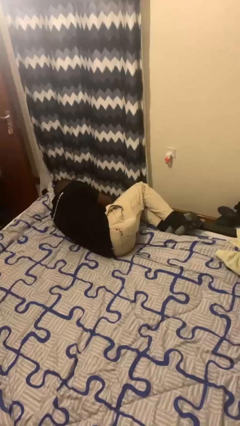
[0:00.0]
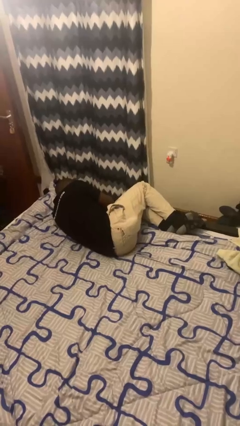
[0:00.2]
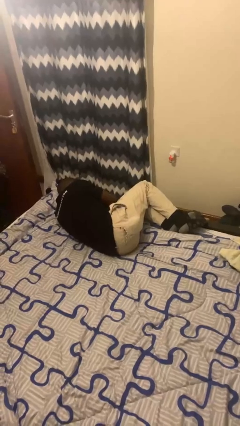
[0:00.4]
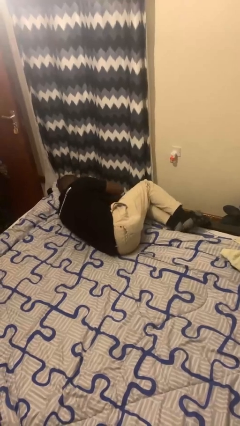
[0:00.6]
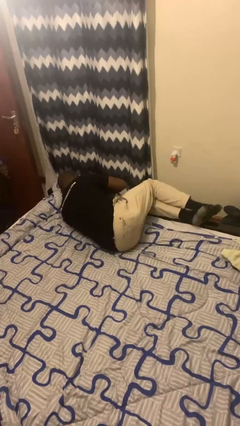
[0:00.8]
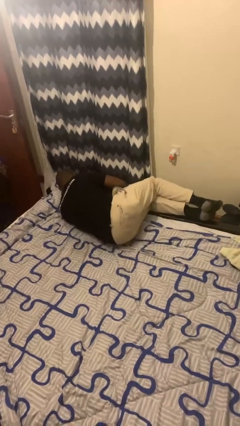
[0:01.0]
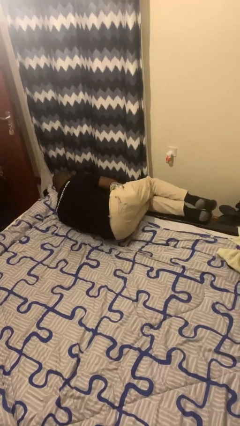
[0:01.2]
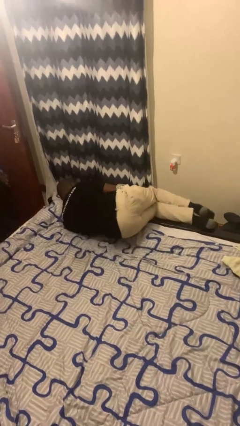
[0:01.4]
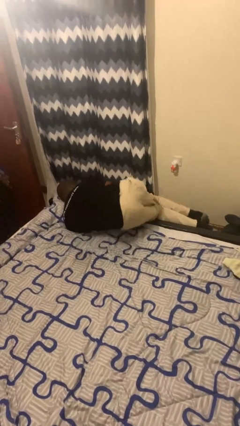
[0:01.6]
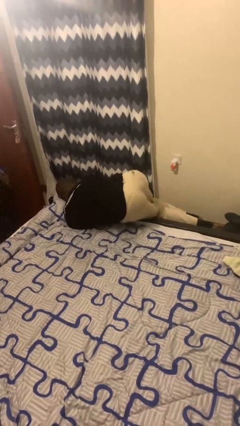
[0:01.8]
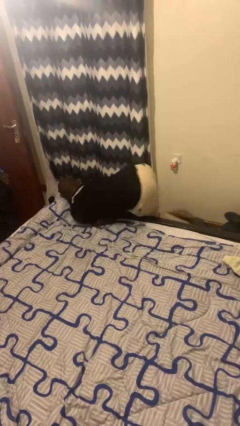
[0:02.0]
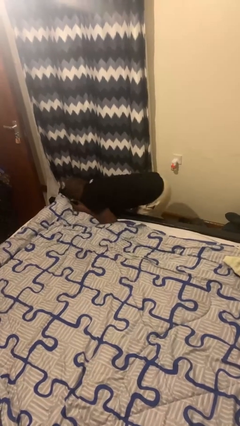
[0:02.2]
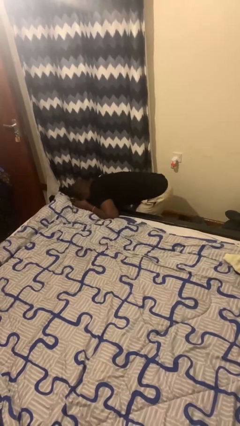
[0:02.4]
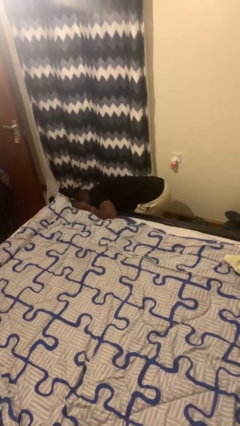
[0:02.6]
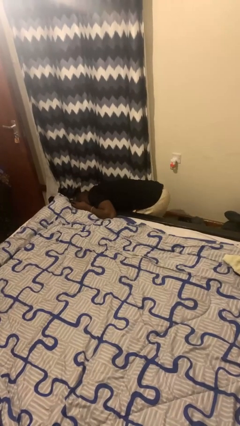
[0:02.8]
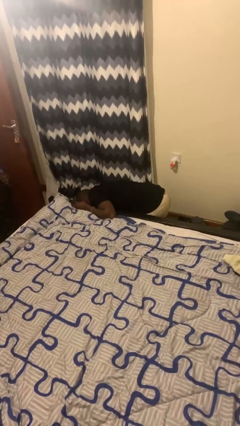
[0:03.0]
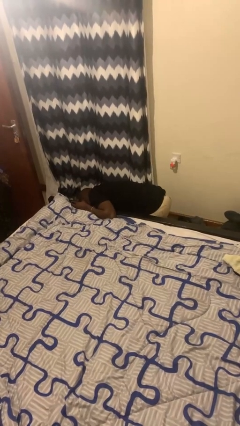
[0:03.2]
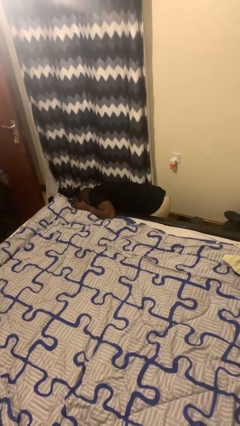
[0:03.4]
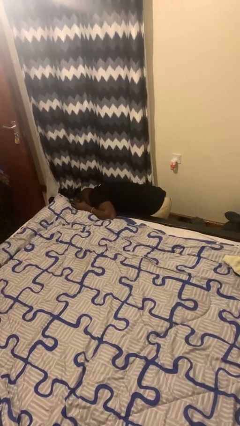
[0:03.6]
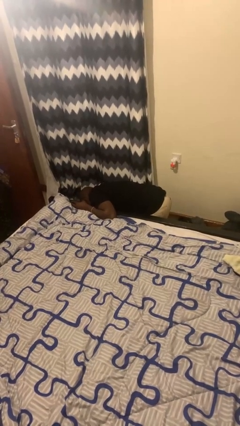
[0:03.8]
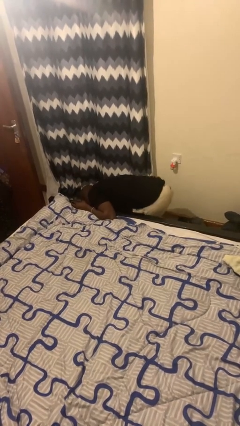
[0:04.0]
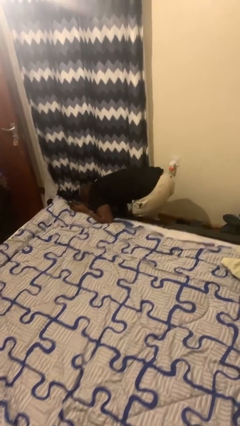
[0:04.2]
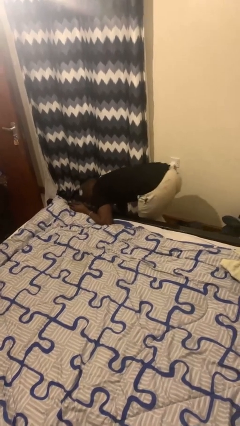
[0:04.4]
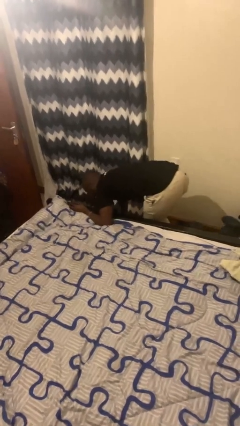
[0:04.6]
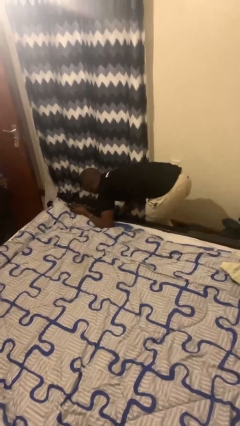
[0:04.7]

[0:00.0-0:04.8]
person falls from bed

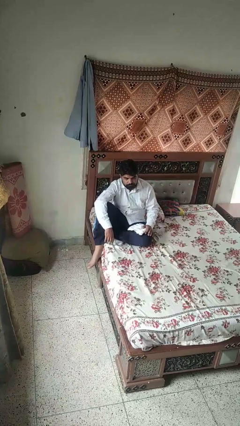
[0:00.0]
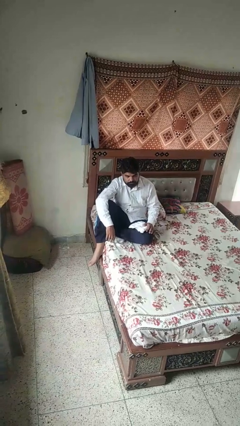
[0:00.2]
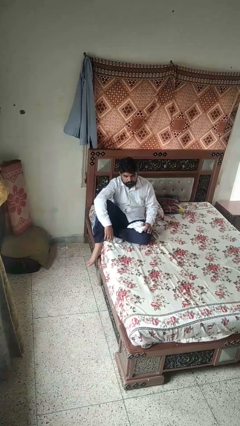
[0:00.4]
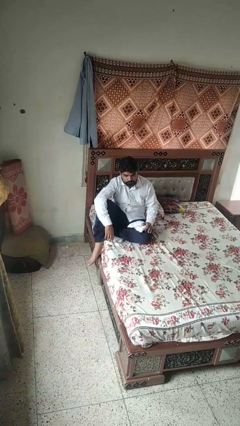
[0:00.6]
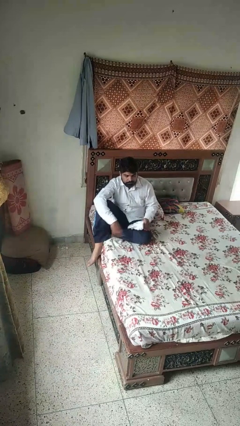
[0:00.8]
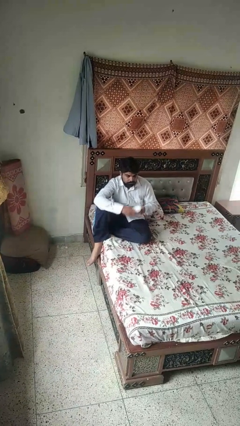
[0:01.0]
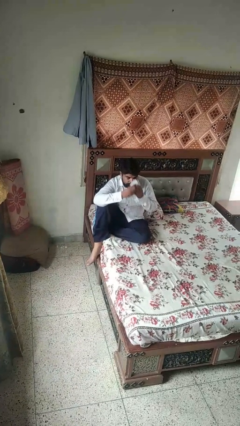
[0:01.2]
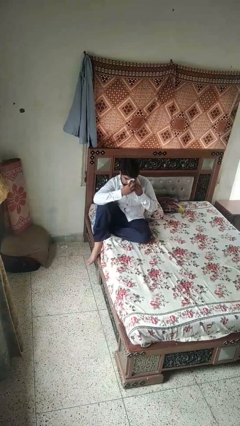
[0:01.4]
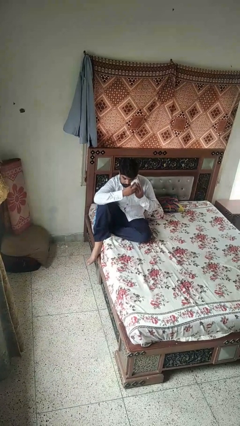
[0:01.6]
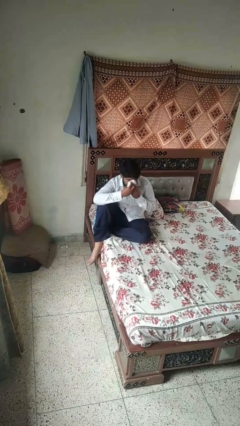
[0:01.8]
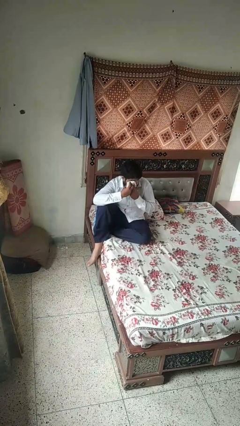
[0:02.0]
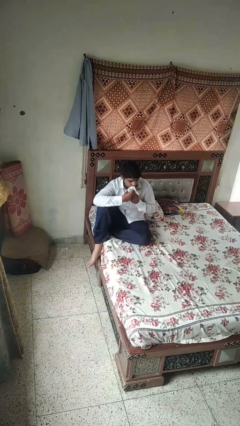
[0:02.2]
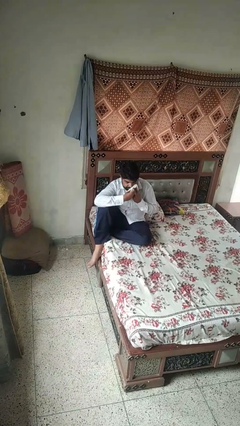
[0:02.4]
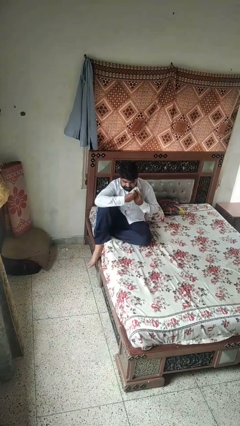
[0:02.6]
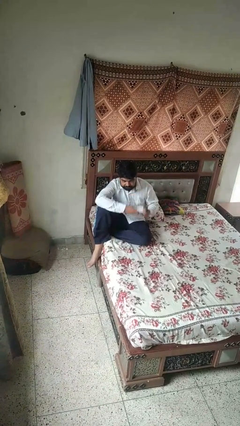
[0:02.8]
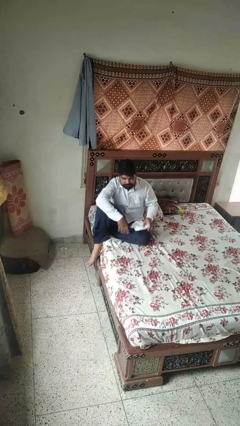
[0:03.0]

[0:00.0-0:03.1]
person wipes mouth with napkin

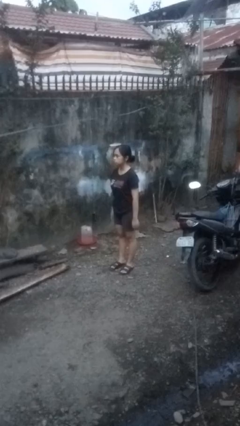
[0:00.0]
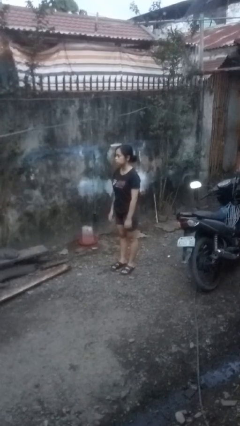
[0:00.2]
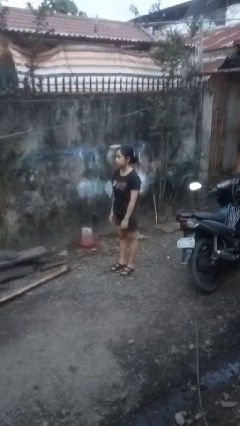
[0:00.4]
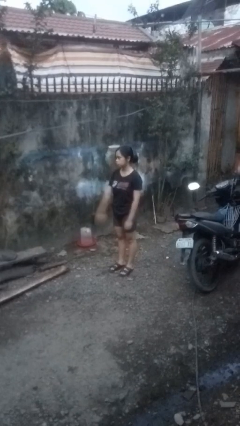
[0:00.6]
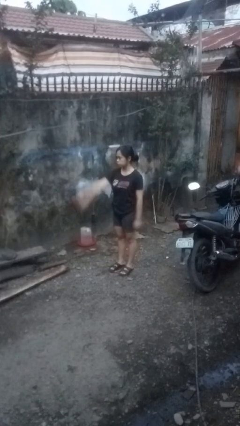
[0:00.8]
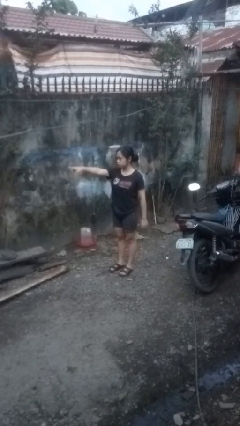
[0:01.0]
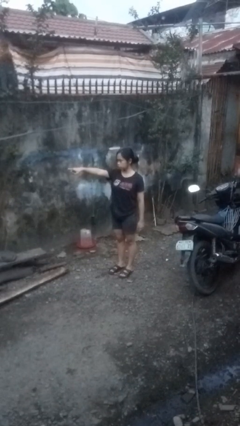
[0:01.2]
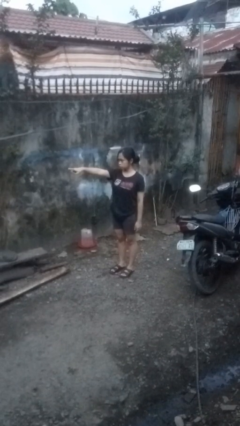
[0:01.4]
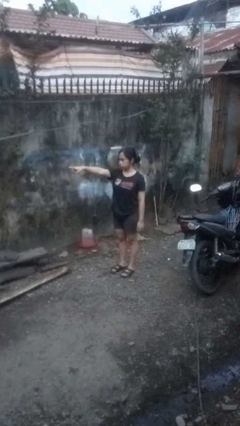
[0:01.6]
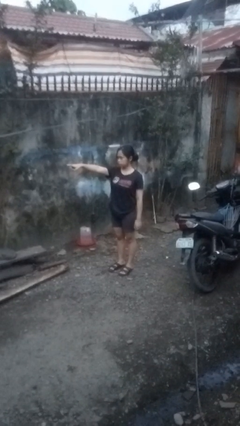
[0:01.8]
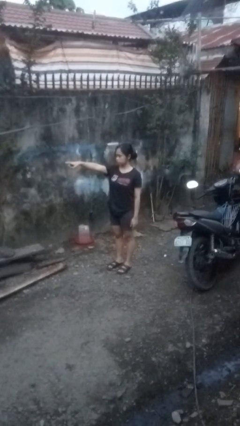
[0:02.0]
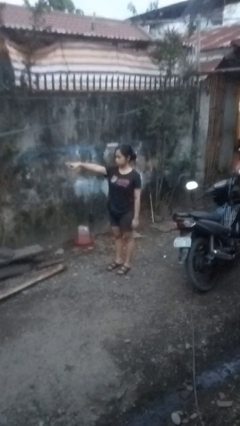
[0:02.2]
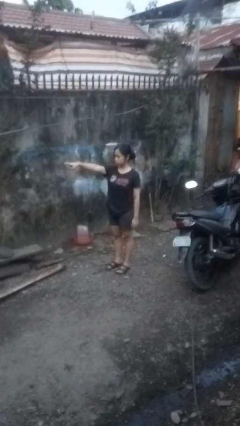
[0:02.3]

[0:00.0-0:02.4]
person points at person

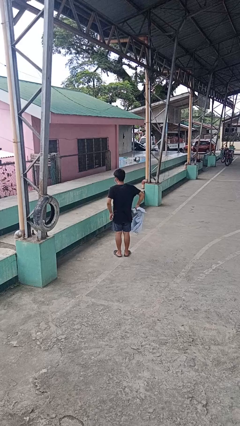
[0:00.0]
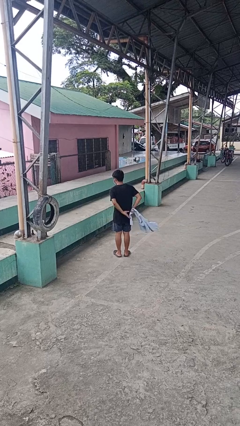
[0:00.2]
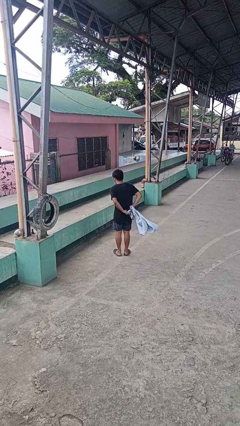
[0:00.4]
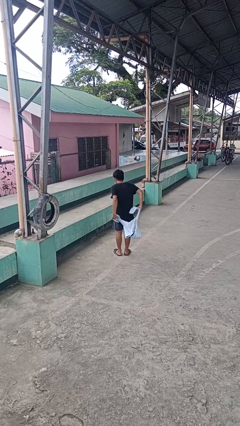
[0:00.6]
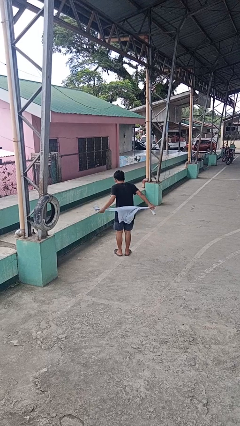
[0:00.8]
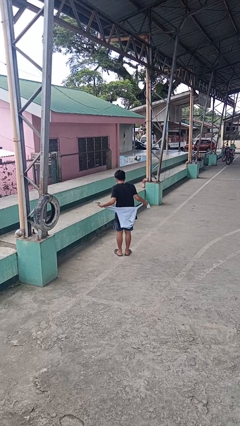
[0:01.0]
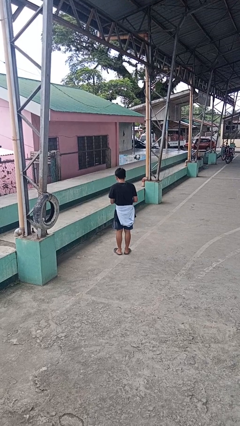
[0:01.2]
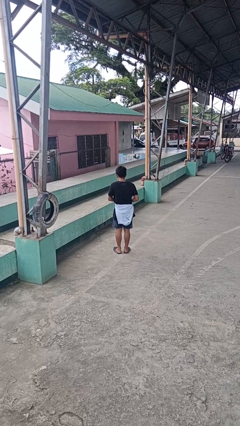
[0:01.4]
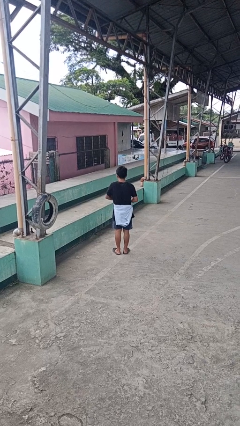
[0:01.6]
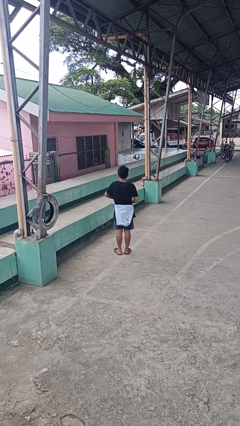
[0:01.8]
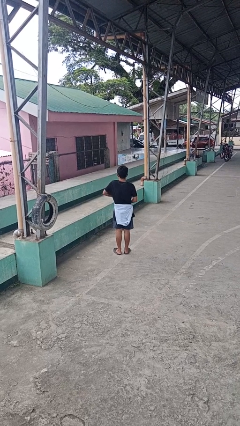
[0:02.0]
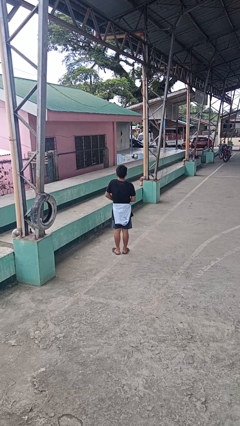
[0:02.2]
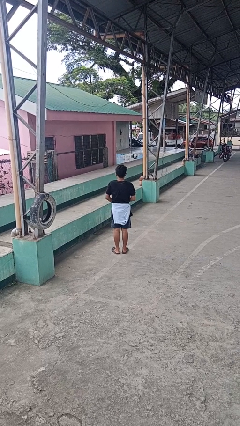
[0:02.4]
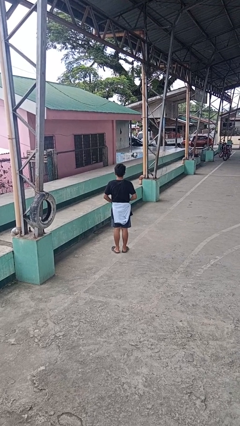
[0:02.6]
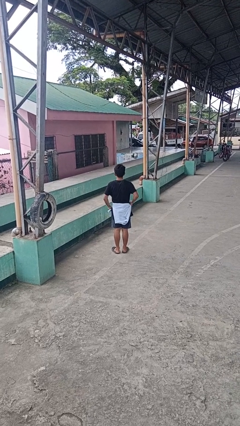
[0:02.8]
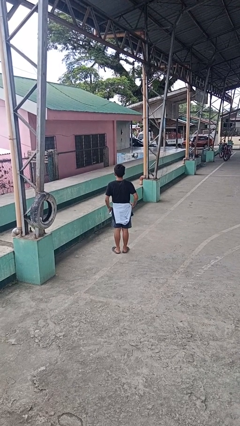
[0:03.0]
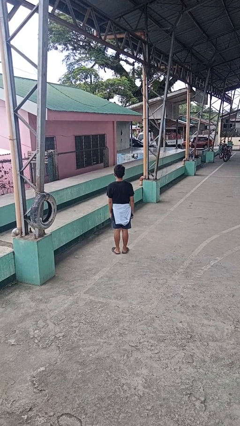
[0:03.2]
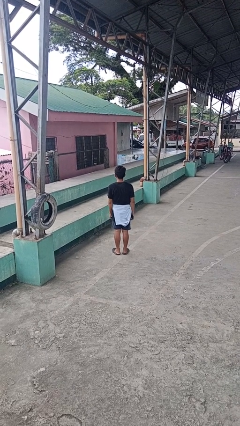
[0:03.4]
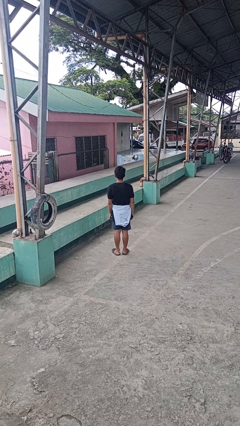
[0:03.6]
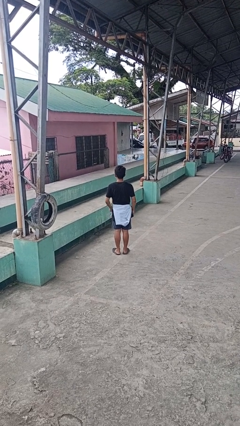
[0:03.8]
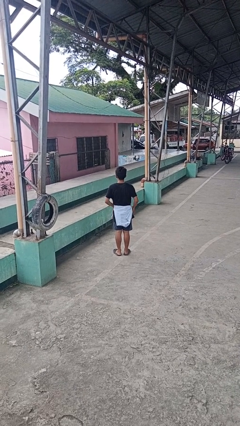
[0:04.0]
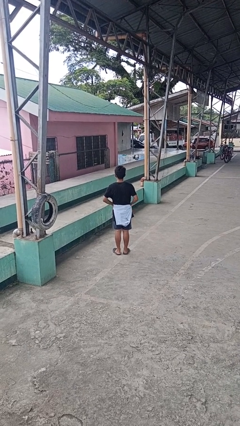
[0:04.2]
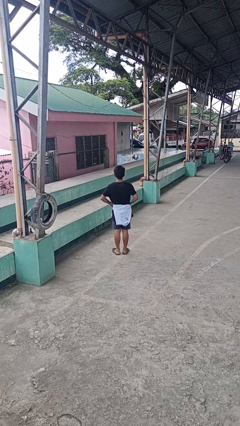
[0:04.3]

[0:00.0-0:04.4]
person ties jacket around waist

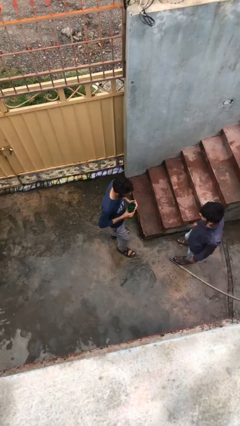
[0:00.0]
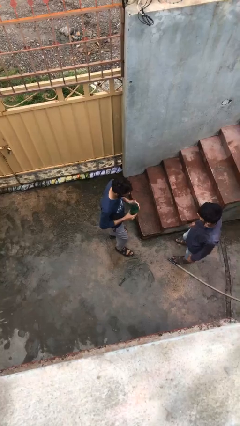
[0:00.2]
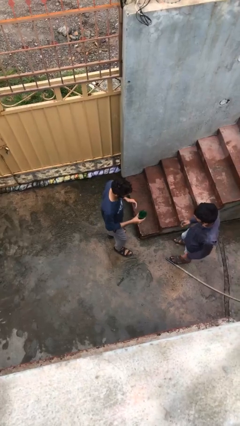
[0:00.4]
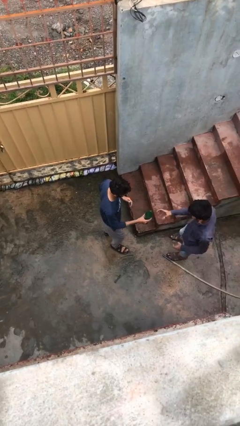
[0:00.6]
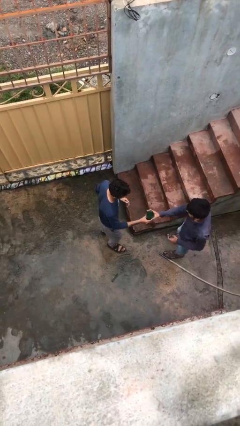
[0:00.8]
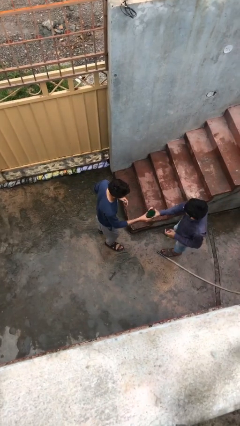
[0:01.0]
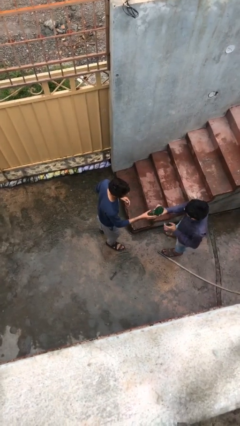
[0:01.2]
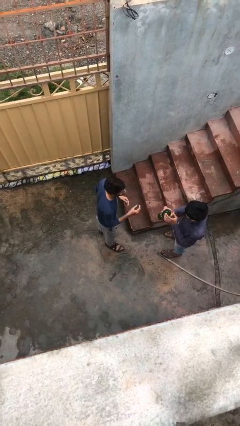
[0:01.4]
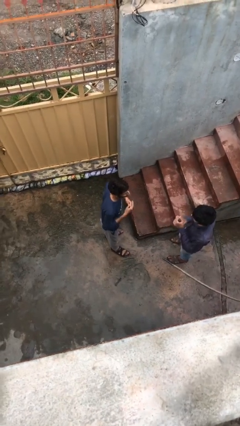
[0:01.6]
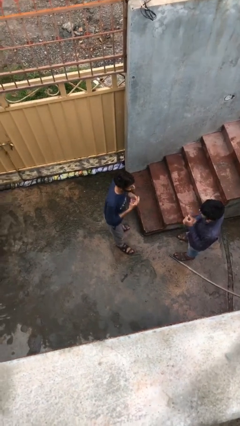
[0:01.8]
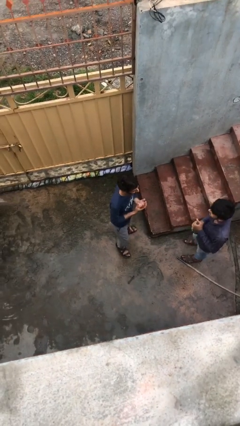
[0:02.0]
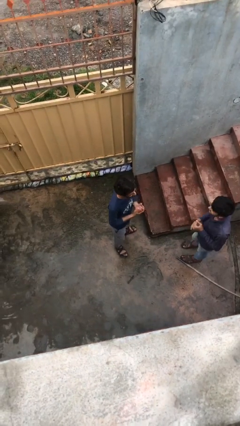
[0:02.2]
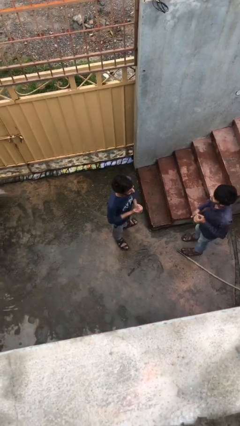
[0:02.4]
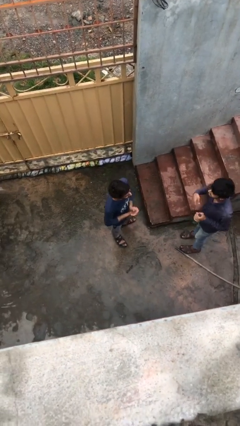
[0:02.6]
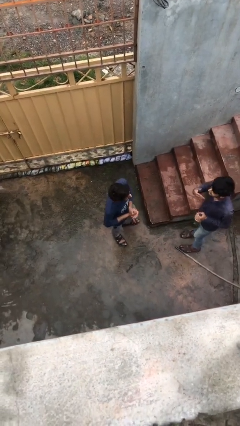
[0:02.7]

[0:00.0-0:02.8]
person transfers object to person

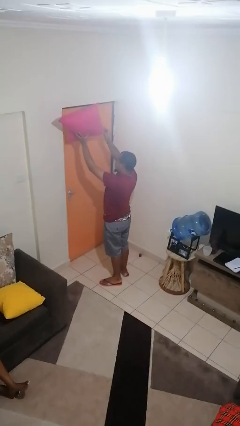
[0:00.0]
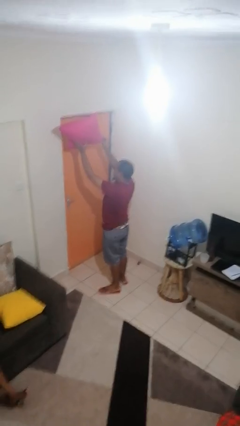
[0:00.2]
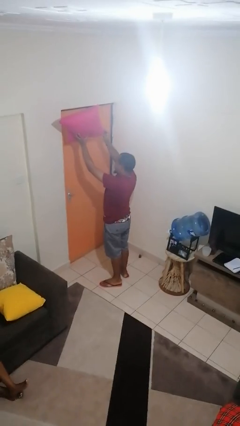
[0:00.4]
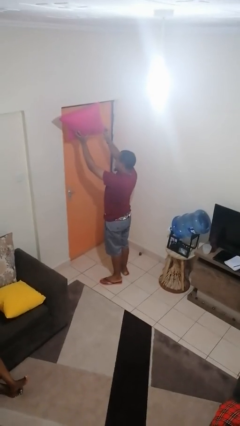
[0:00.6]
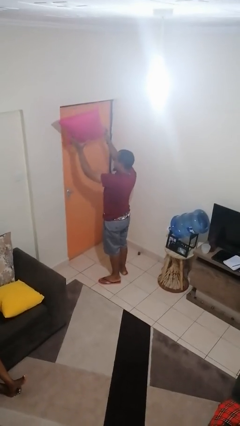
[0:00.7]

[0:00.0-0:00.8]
person drops object
